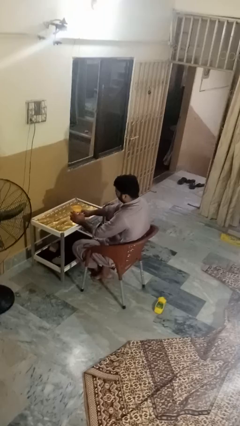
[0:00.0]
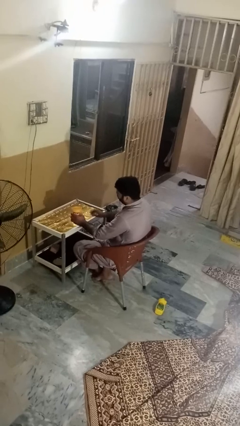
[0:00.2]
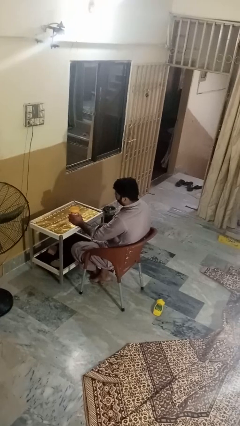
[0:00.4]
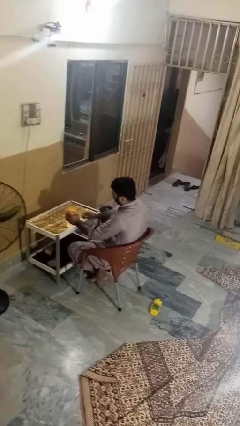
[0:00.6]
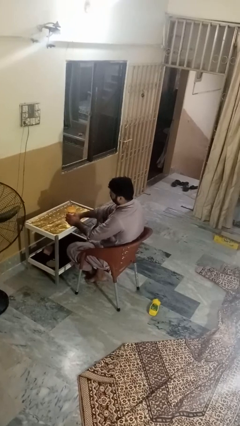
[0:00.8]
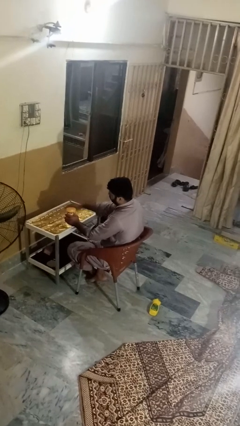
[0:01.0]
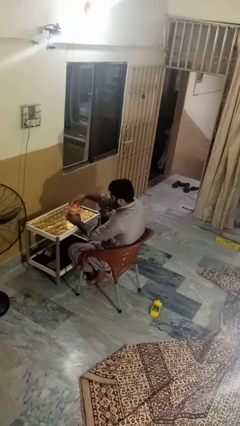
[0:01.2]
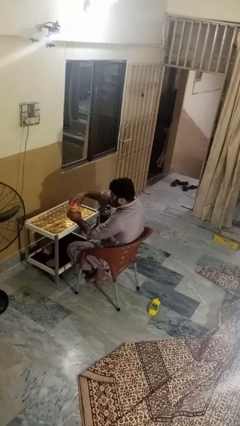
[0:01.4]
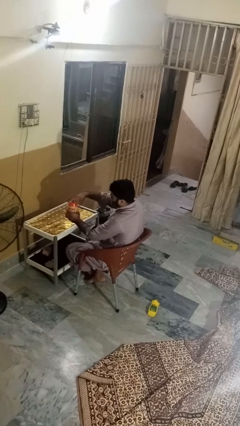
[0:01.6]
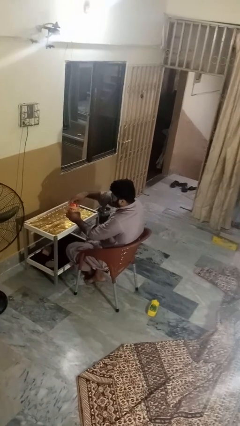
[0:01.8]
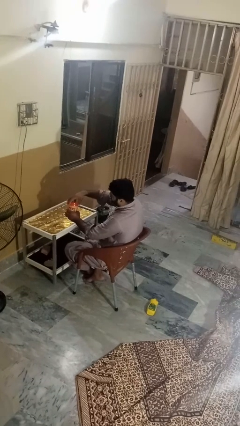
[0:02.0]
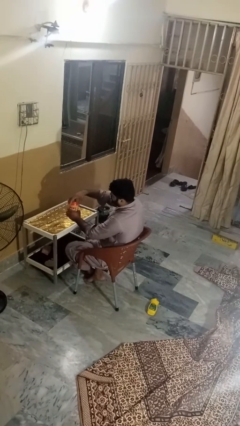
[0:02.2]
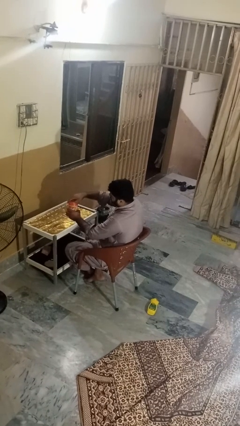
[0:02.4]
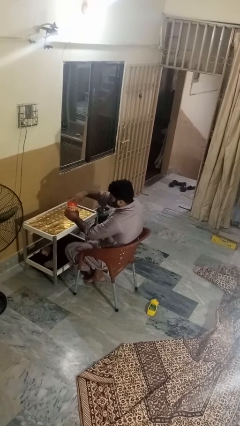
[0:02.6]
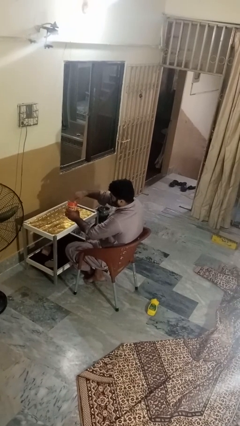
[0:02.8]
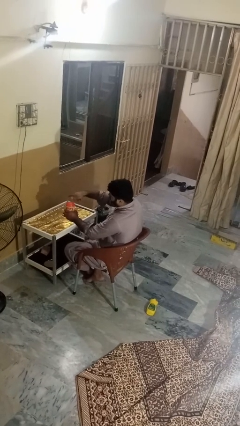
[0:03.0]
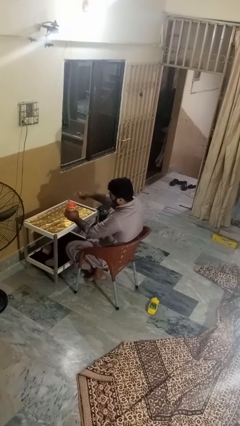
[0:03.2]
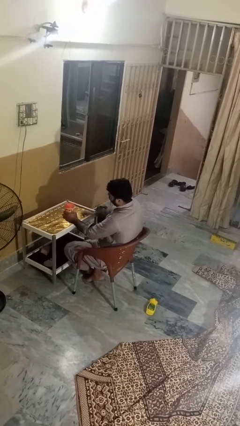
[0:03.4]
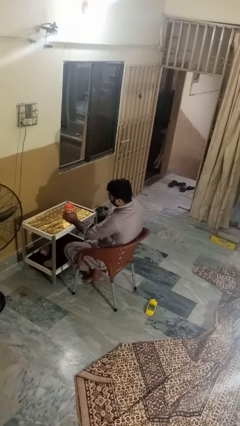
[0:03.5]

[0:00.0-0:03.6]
person closes jar

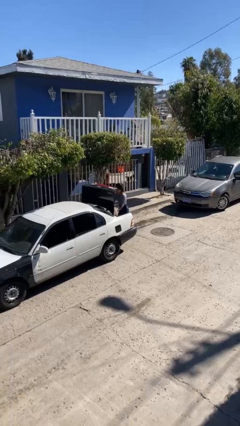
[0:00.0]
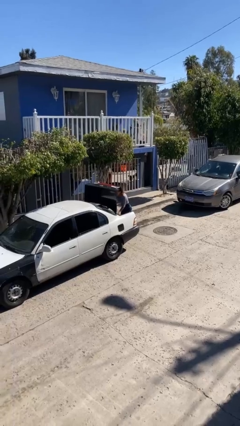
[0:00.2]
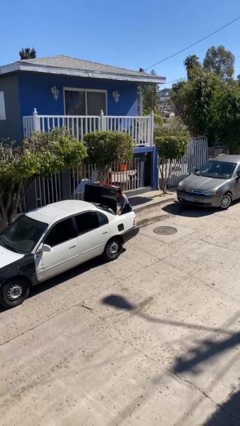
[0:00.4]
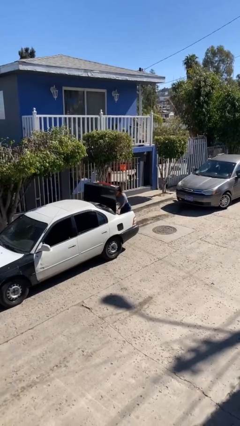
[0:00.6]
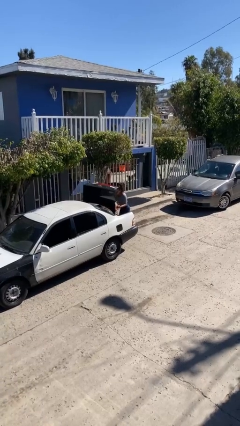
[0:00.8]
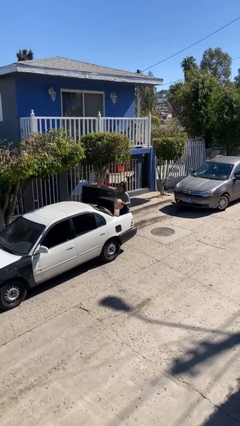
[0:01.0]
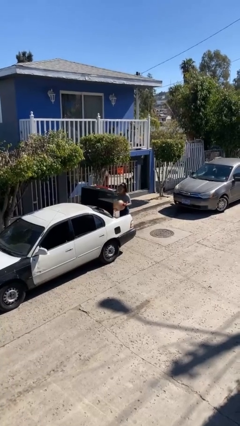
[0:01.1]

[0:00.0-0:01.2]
person unloads car

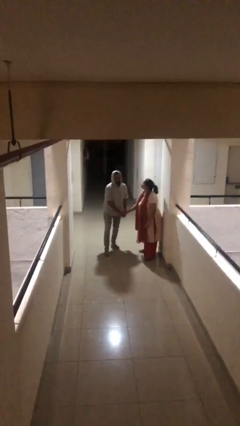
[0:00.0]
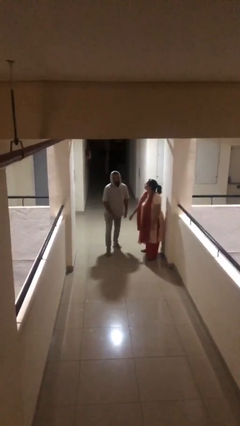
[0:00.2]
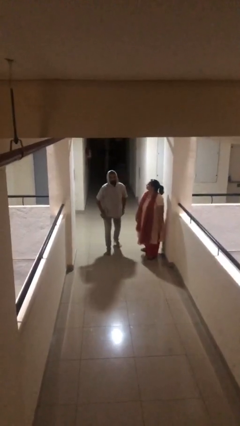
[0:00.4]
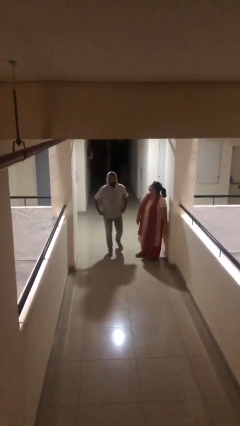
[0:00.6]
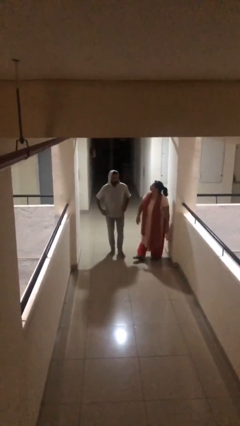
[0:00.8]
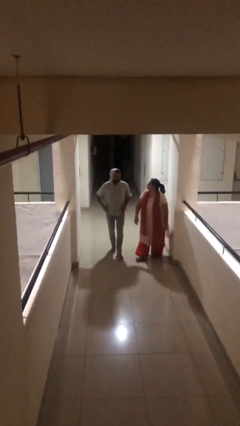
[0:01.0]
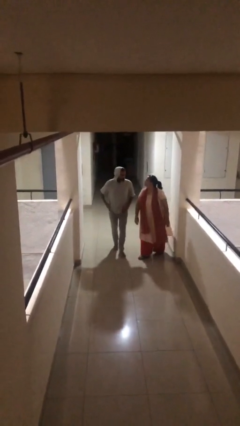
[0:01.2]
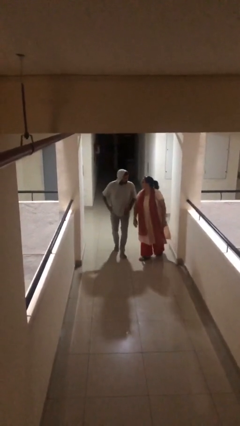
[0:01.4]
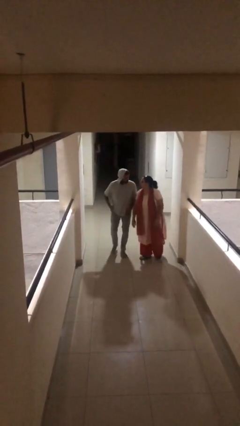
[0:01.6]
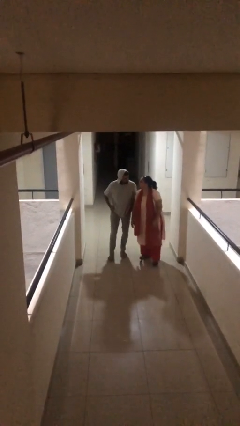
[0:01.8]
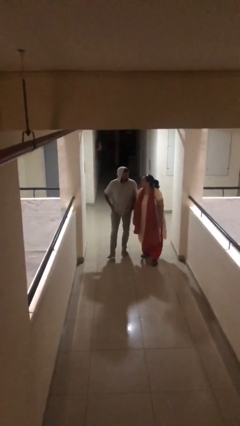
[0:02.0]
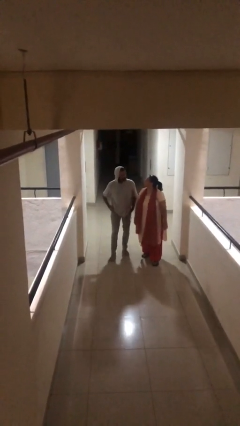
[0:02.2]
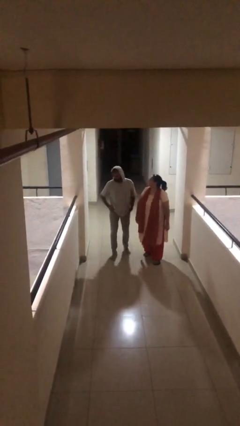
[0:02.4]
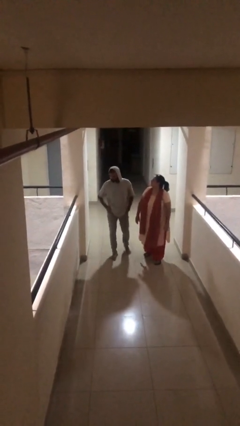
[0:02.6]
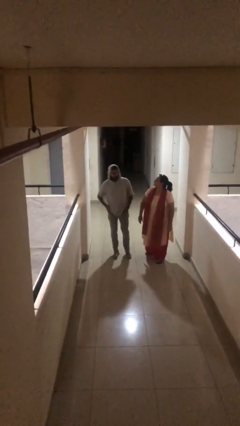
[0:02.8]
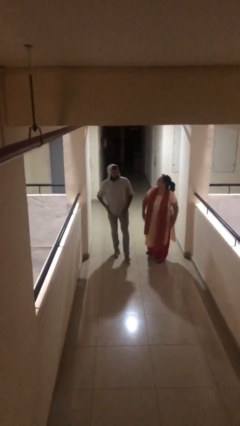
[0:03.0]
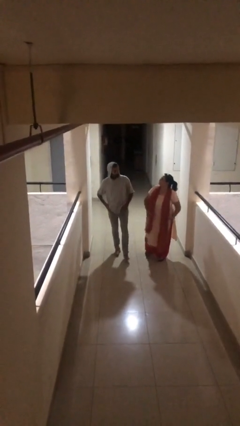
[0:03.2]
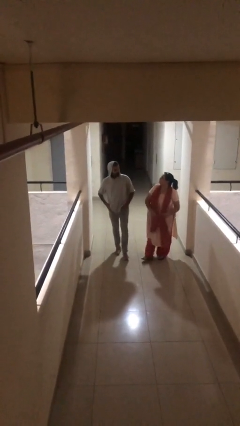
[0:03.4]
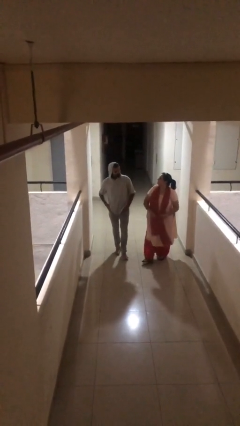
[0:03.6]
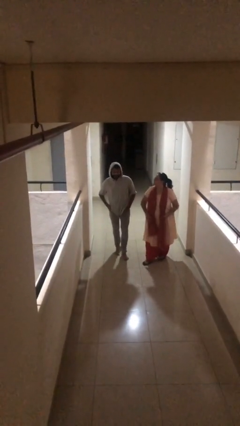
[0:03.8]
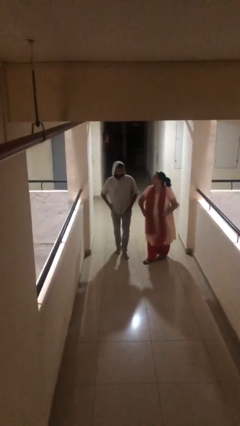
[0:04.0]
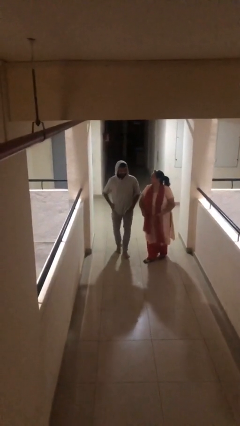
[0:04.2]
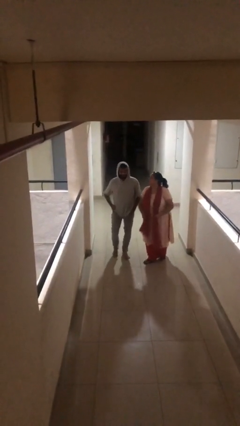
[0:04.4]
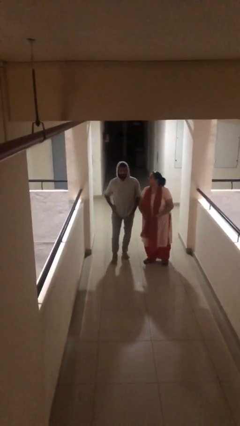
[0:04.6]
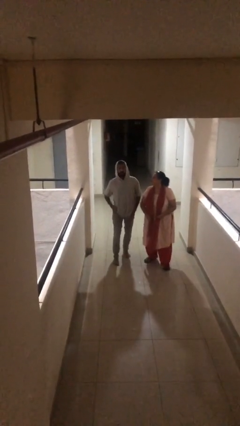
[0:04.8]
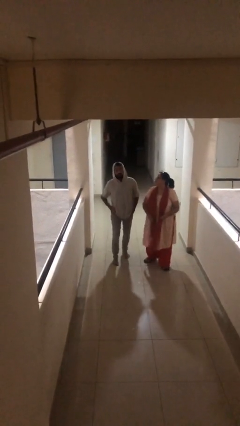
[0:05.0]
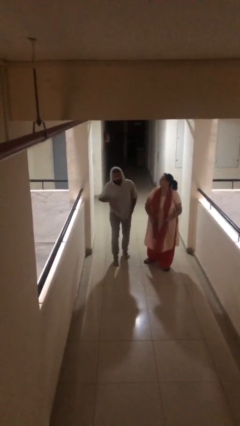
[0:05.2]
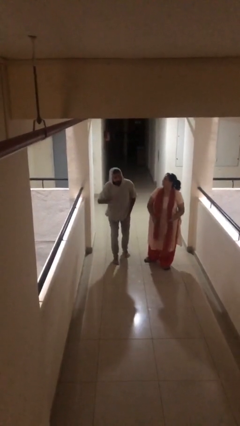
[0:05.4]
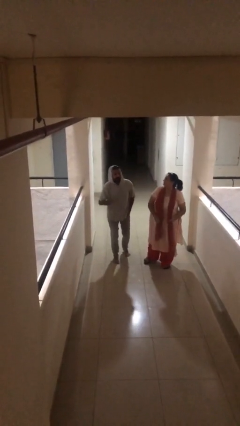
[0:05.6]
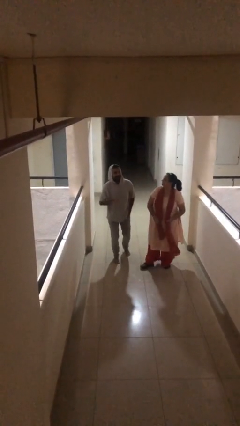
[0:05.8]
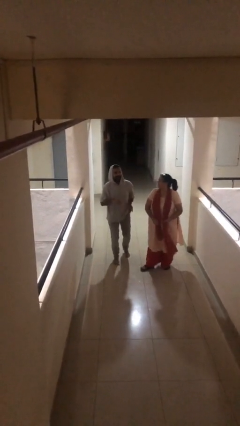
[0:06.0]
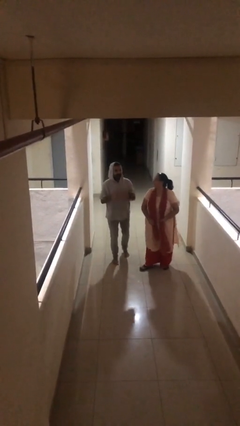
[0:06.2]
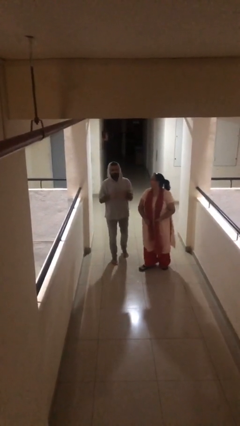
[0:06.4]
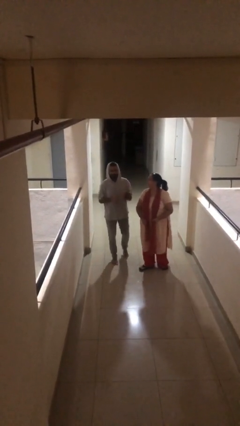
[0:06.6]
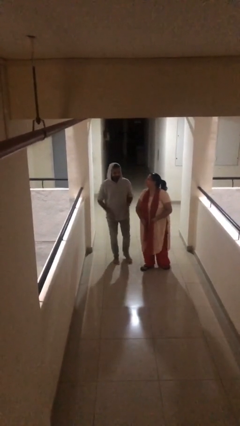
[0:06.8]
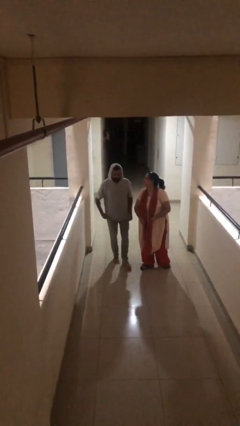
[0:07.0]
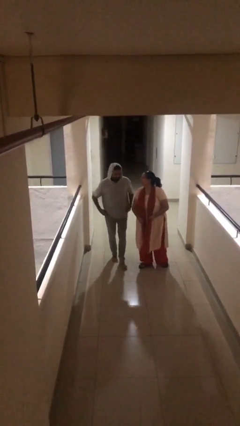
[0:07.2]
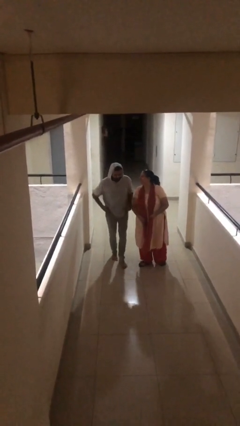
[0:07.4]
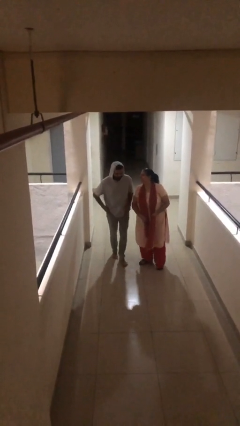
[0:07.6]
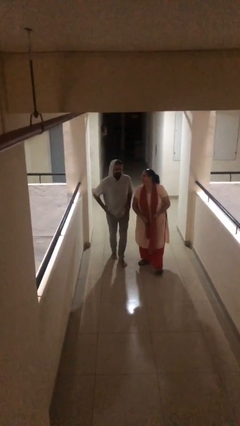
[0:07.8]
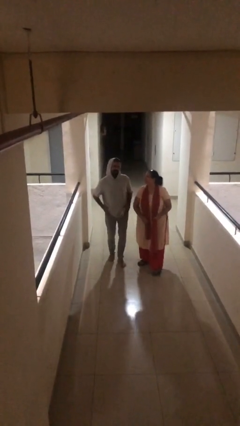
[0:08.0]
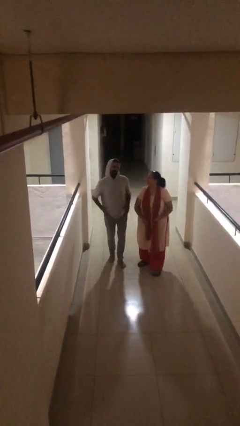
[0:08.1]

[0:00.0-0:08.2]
person talks to person

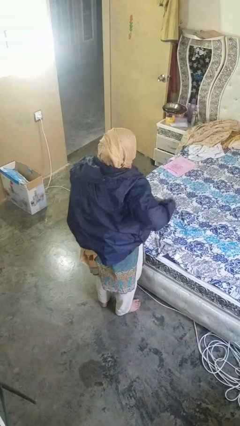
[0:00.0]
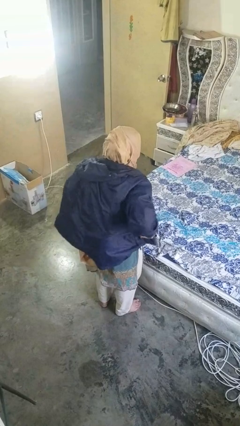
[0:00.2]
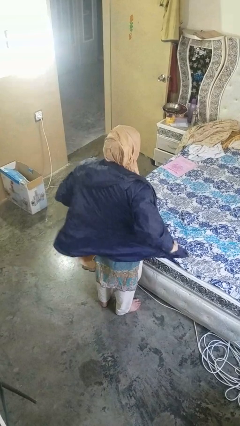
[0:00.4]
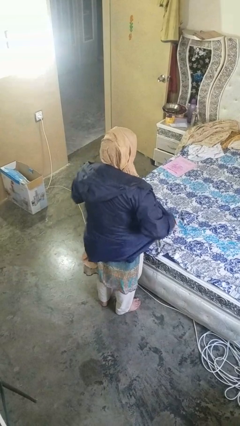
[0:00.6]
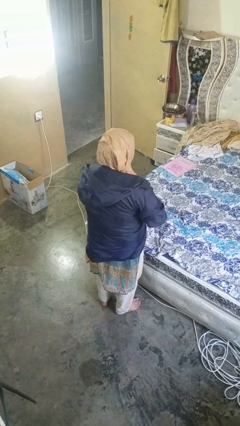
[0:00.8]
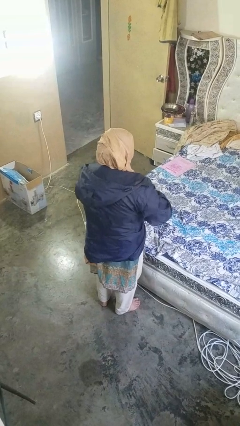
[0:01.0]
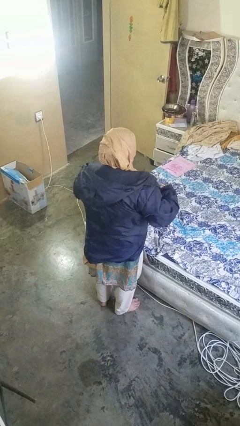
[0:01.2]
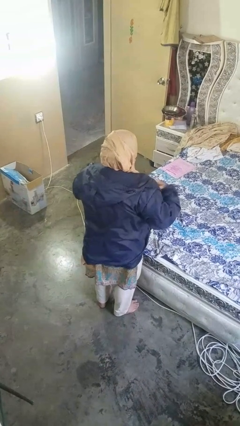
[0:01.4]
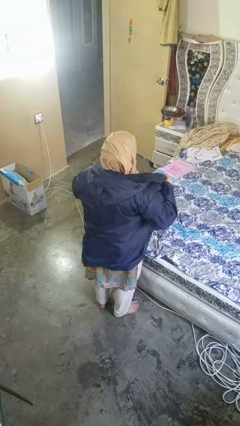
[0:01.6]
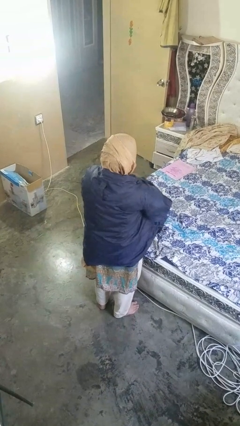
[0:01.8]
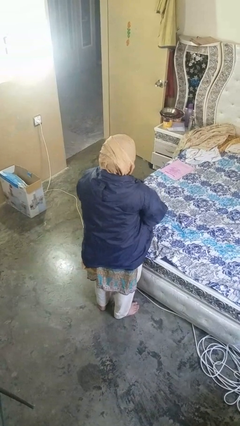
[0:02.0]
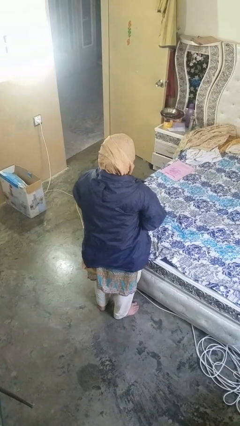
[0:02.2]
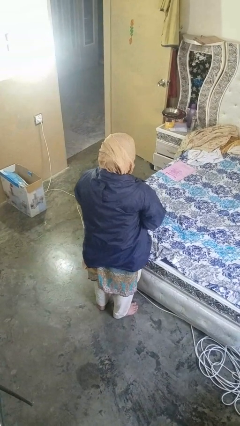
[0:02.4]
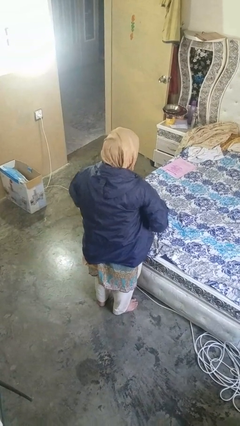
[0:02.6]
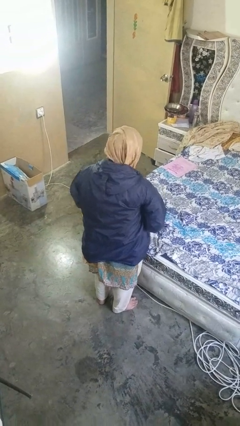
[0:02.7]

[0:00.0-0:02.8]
person zips up jacket

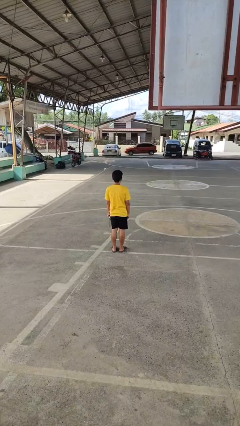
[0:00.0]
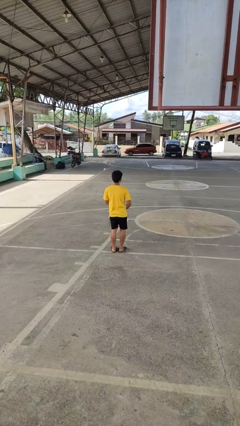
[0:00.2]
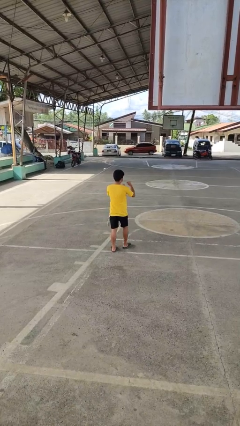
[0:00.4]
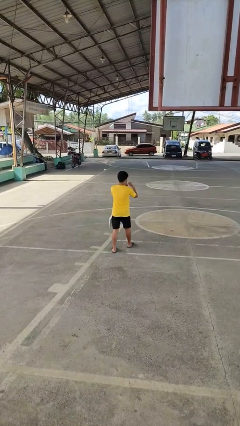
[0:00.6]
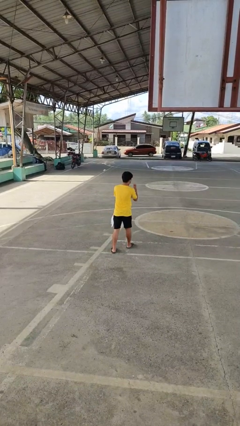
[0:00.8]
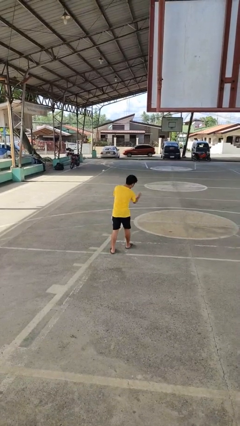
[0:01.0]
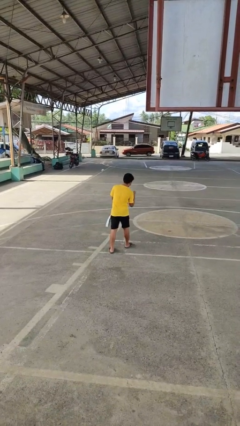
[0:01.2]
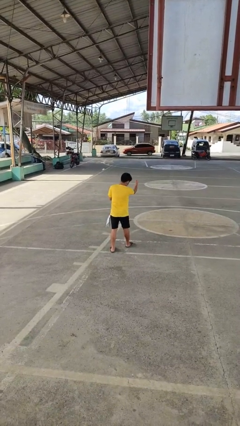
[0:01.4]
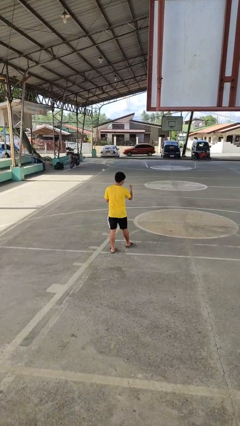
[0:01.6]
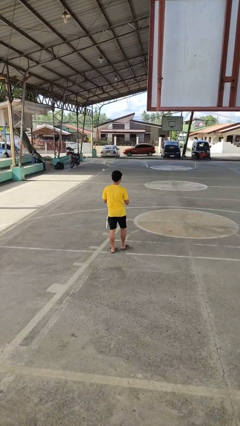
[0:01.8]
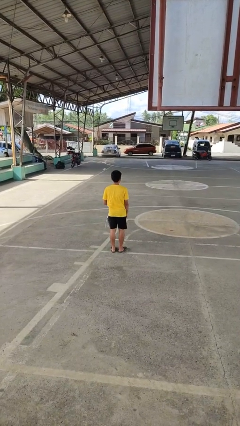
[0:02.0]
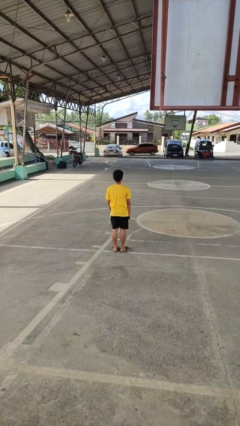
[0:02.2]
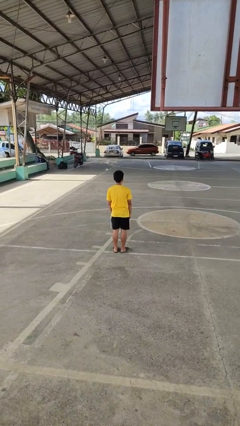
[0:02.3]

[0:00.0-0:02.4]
person punches
